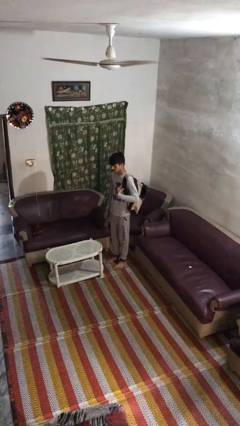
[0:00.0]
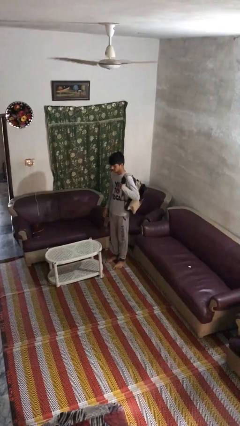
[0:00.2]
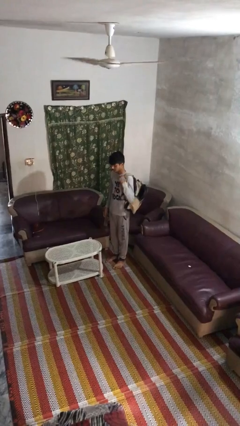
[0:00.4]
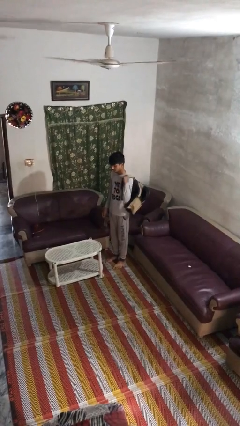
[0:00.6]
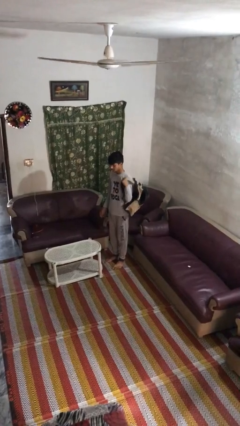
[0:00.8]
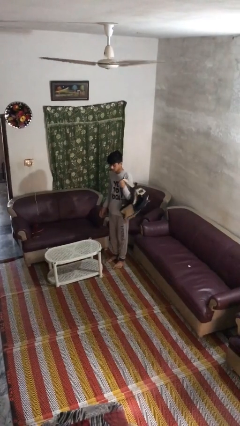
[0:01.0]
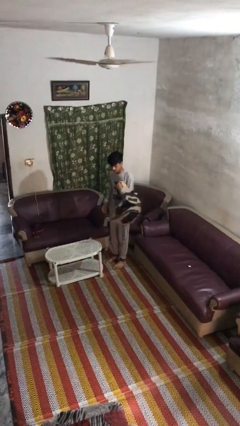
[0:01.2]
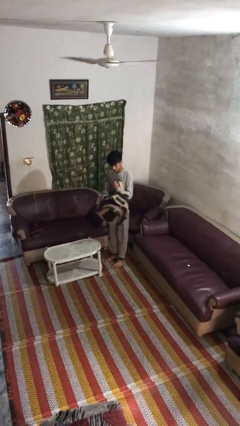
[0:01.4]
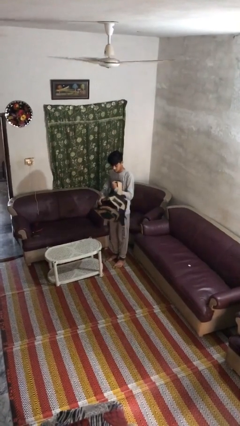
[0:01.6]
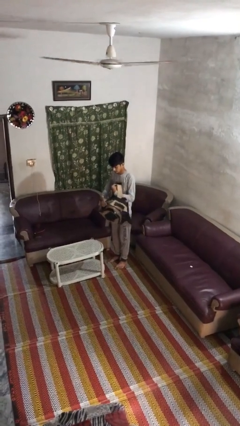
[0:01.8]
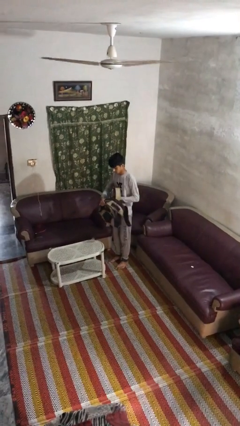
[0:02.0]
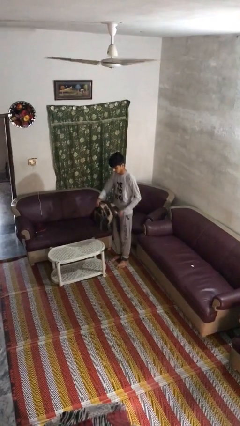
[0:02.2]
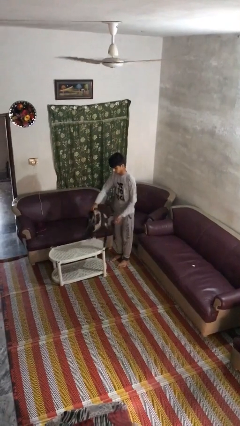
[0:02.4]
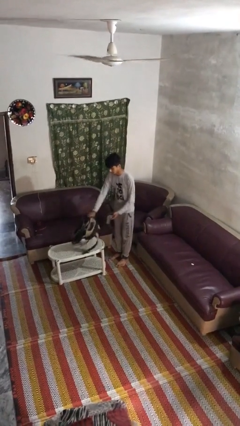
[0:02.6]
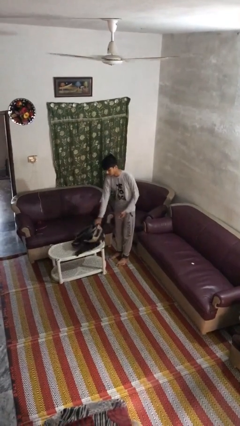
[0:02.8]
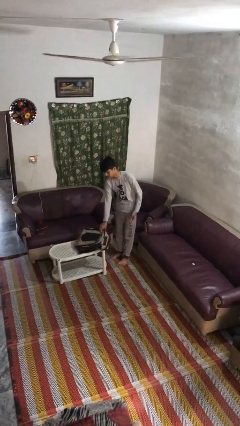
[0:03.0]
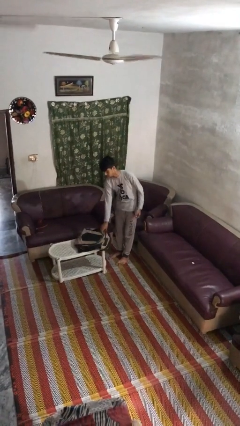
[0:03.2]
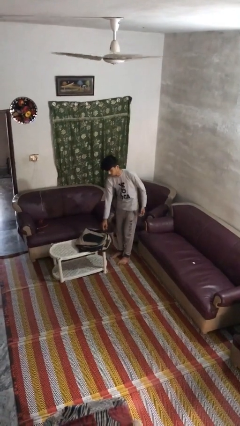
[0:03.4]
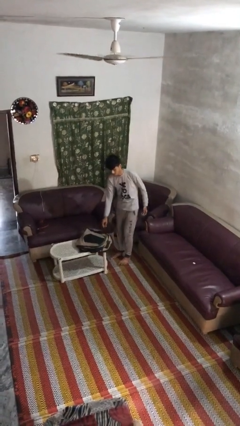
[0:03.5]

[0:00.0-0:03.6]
person puts down object on table

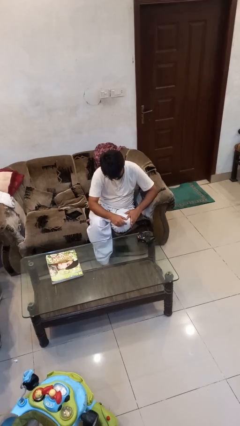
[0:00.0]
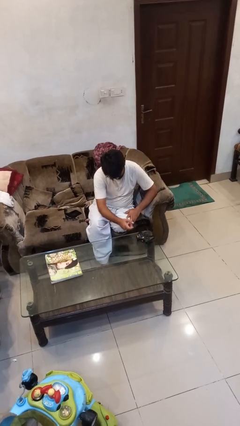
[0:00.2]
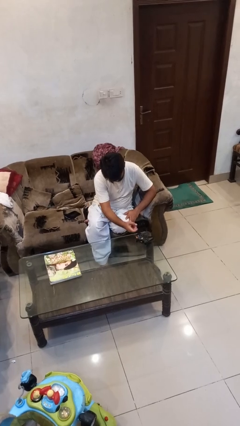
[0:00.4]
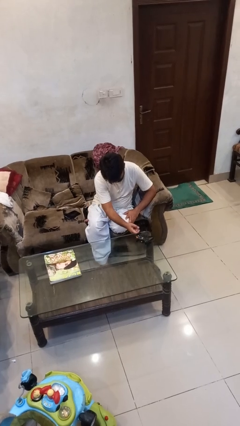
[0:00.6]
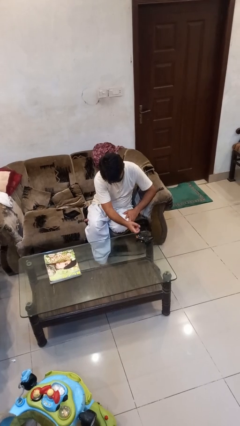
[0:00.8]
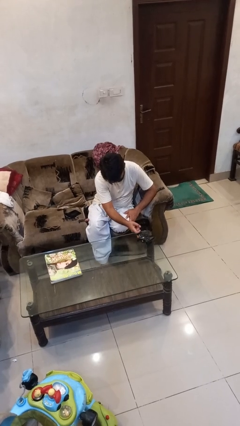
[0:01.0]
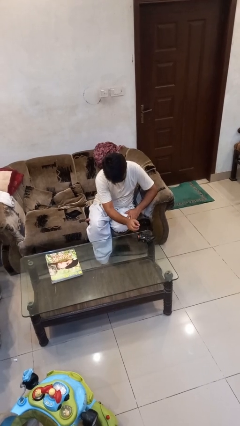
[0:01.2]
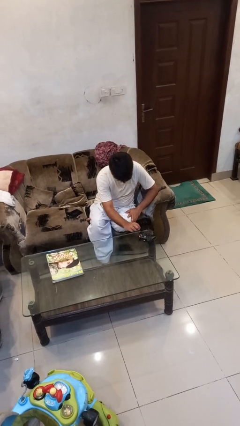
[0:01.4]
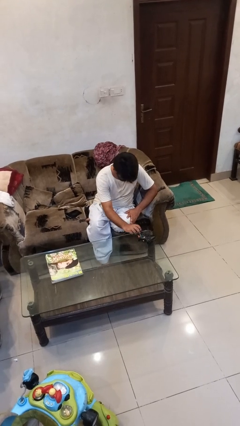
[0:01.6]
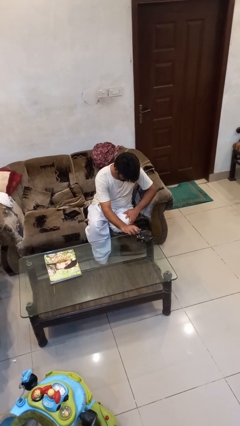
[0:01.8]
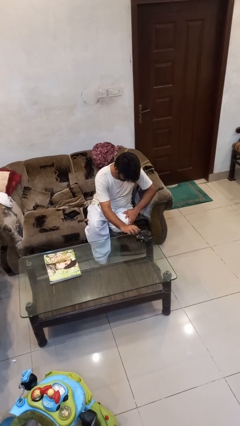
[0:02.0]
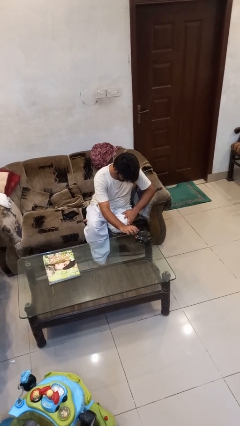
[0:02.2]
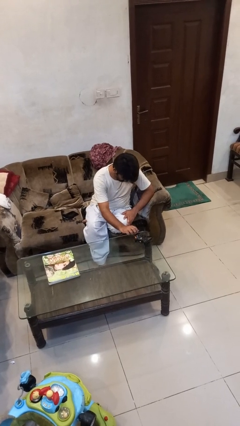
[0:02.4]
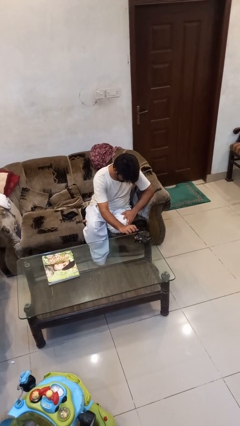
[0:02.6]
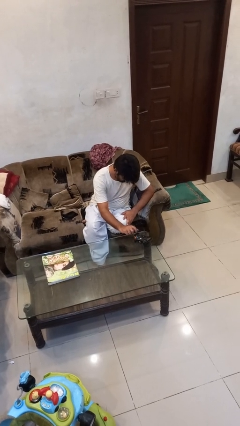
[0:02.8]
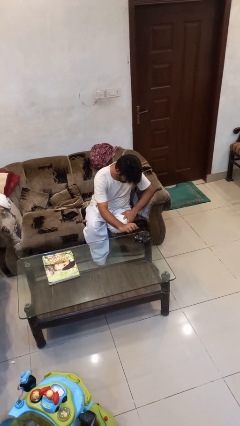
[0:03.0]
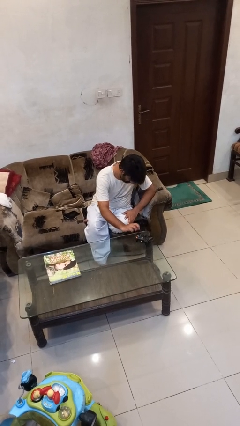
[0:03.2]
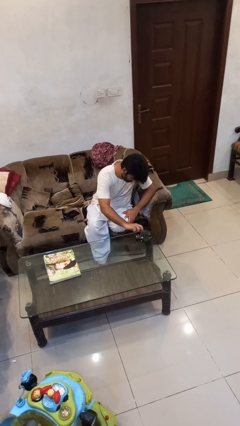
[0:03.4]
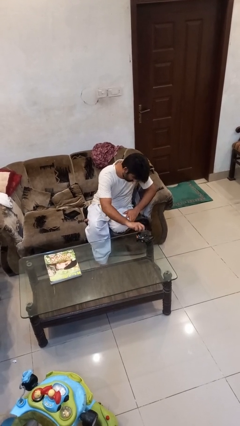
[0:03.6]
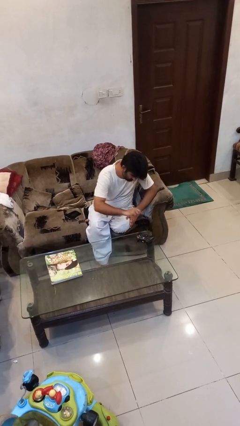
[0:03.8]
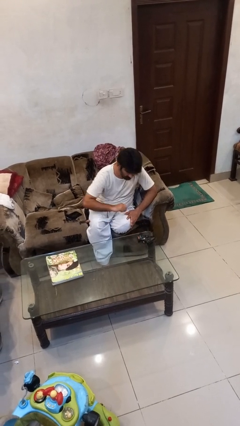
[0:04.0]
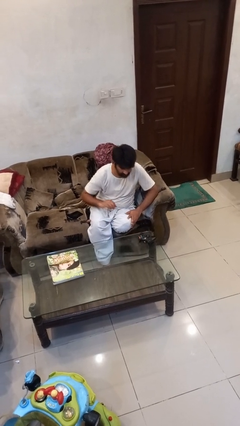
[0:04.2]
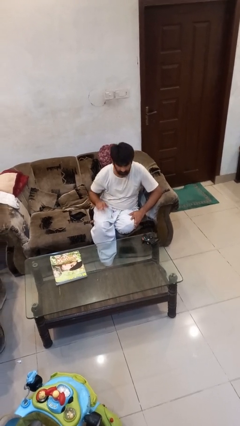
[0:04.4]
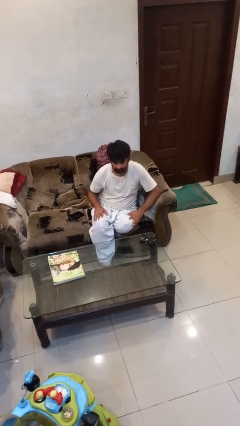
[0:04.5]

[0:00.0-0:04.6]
person taps object with finger

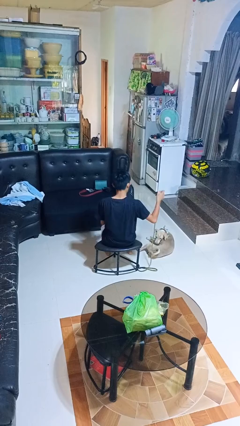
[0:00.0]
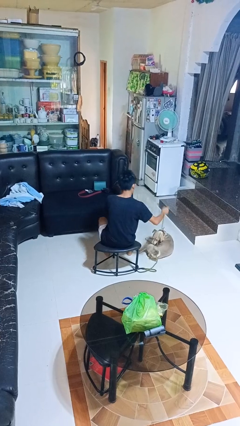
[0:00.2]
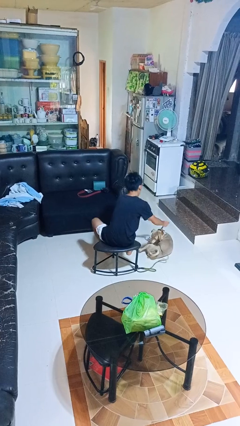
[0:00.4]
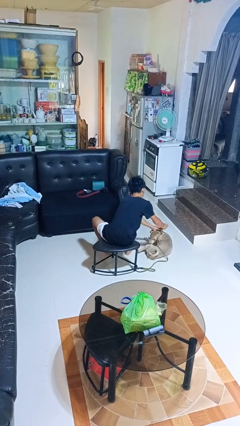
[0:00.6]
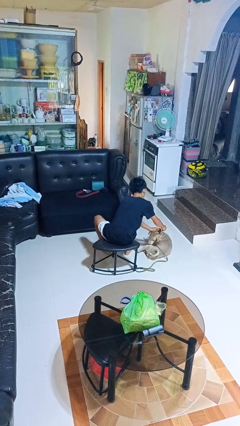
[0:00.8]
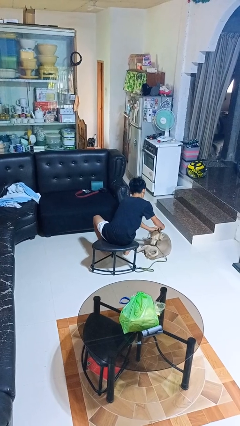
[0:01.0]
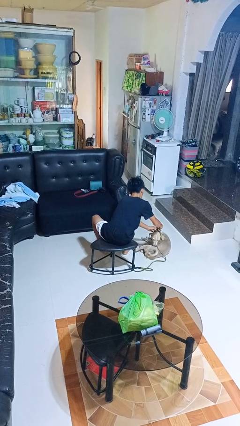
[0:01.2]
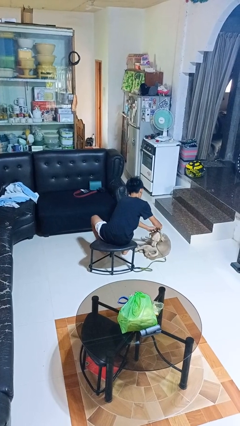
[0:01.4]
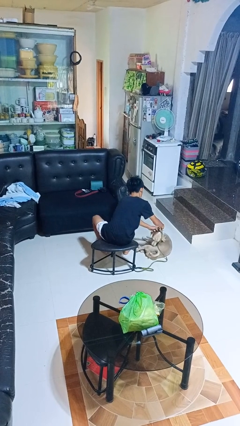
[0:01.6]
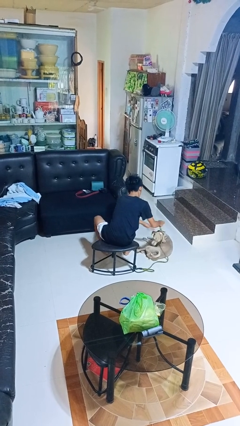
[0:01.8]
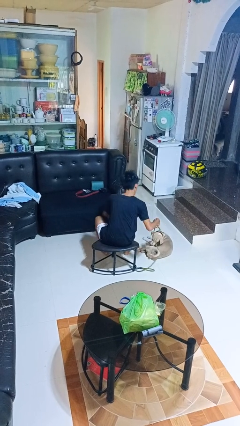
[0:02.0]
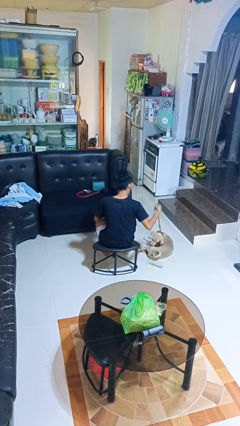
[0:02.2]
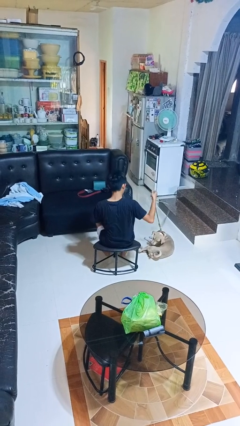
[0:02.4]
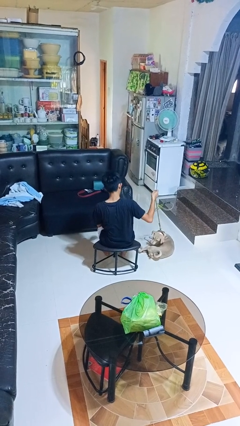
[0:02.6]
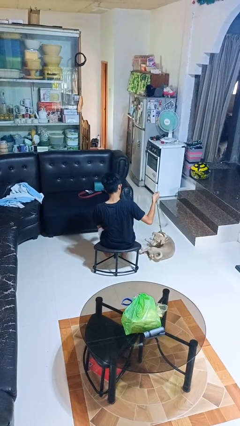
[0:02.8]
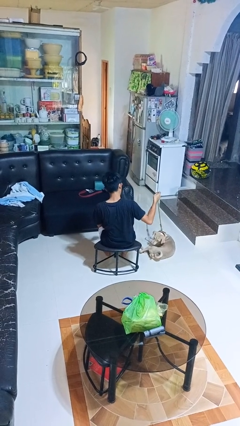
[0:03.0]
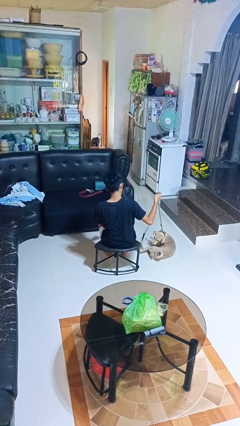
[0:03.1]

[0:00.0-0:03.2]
person attaches leash to dog

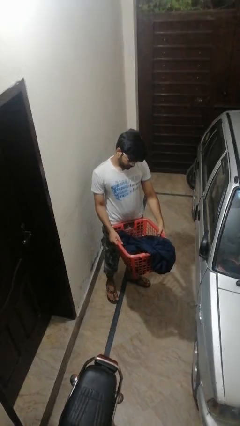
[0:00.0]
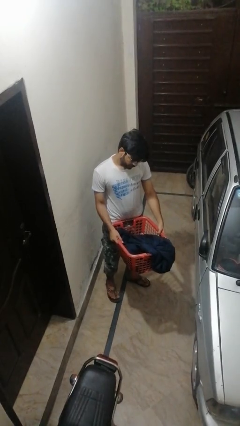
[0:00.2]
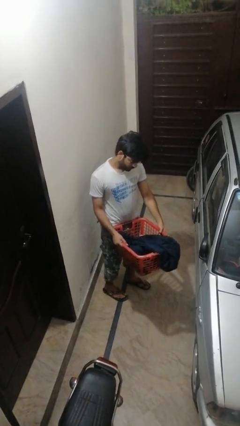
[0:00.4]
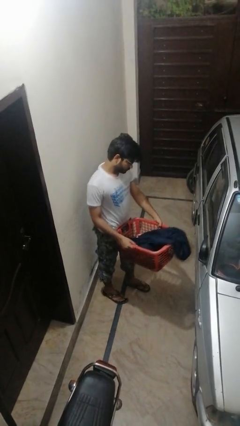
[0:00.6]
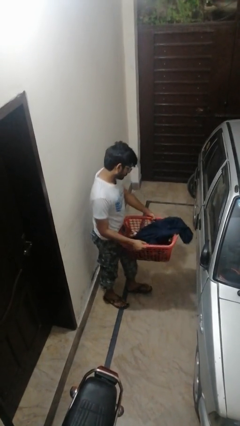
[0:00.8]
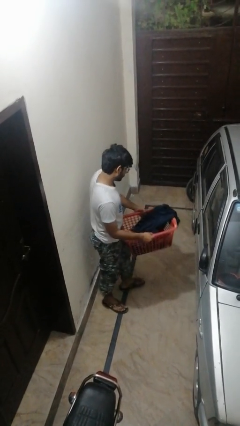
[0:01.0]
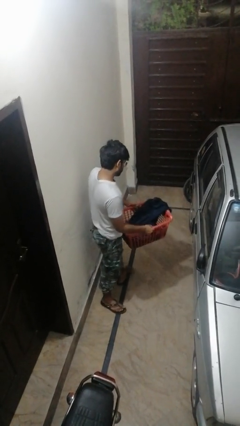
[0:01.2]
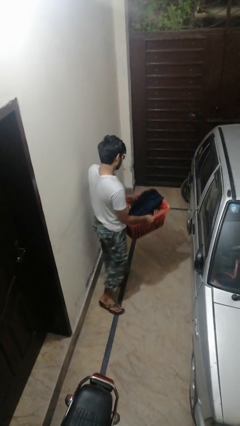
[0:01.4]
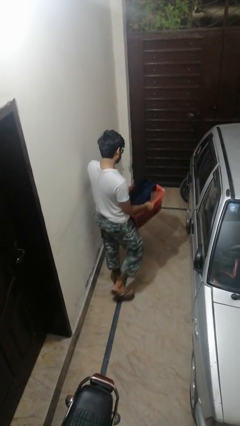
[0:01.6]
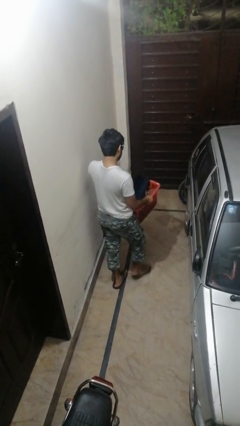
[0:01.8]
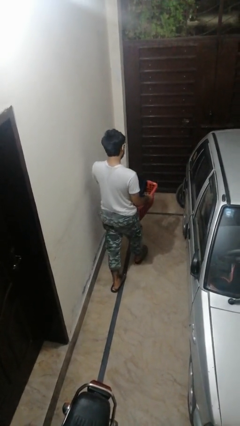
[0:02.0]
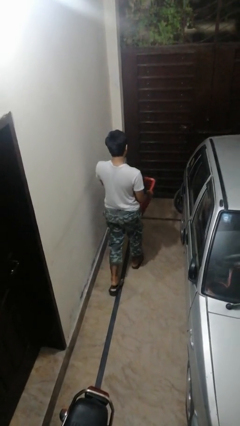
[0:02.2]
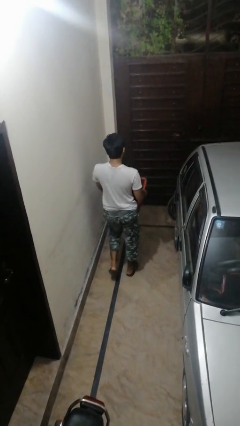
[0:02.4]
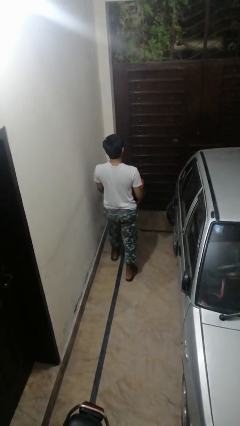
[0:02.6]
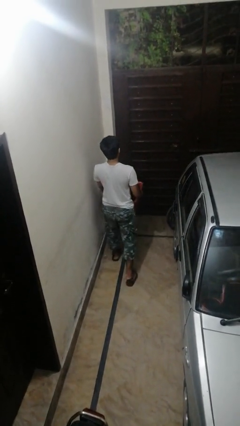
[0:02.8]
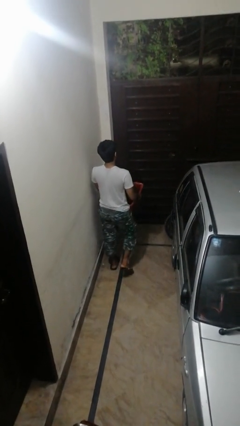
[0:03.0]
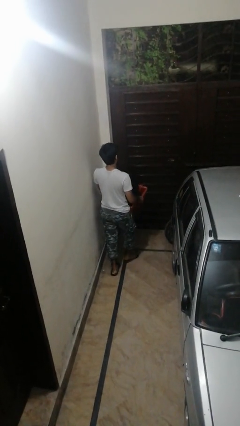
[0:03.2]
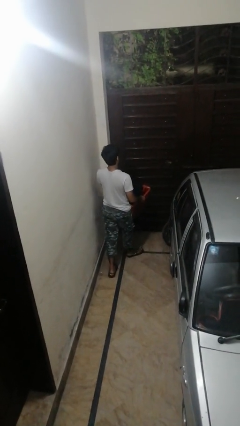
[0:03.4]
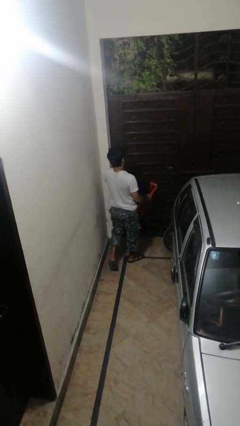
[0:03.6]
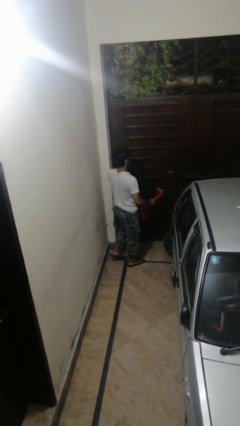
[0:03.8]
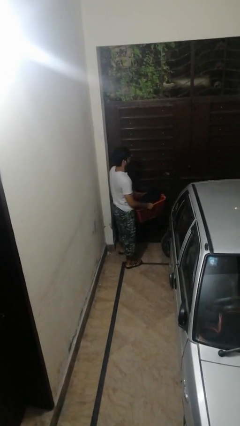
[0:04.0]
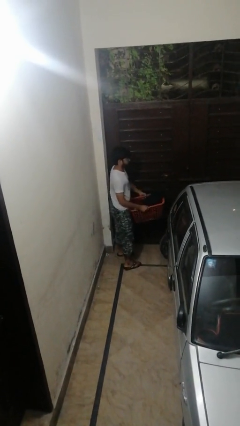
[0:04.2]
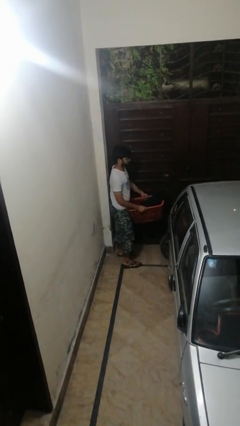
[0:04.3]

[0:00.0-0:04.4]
person carries laundry basket

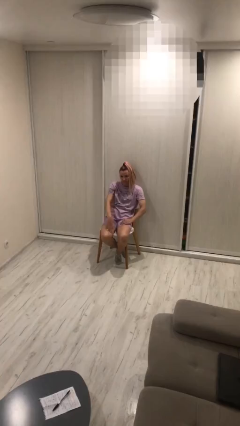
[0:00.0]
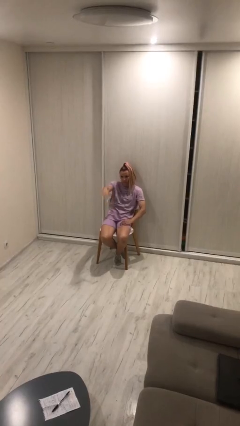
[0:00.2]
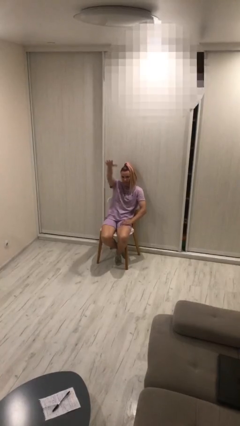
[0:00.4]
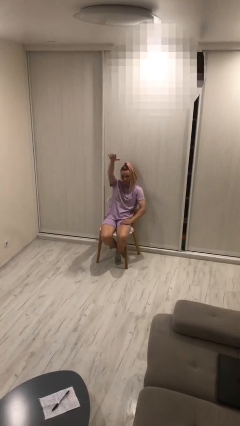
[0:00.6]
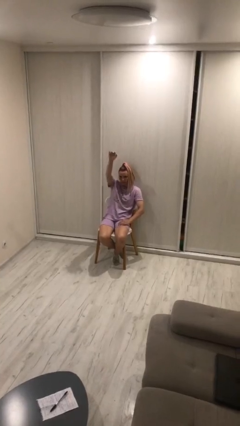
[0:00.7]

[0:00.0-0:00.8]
person gestures swipe up

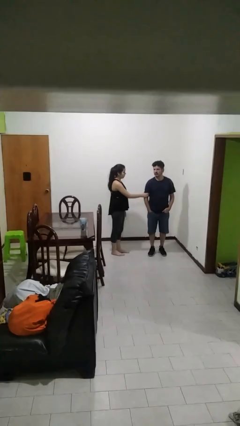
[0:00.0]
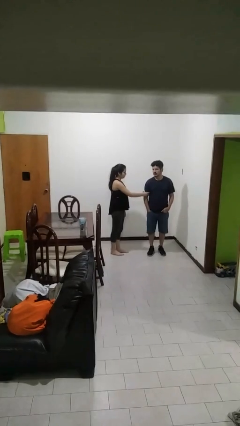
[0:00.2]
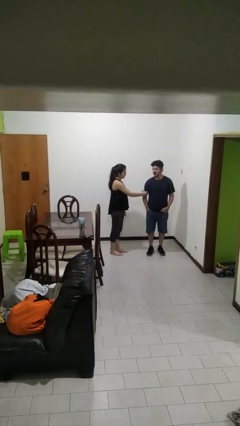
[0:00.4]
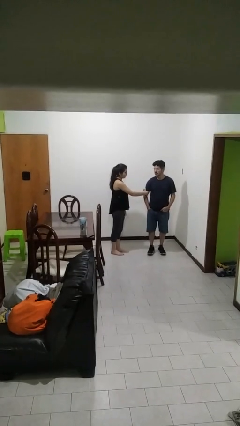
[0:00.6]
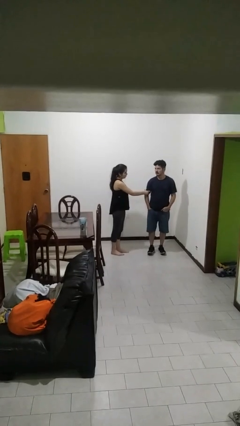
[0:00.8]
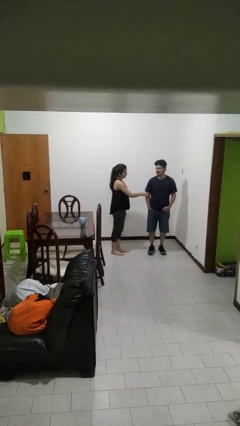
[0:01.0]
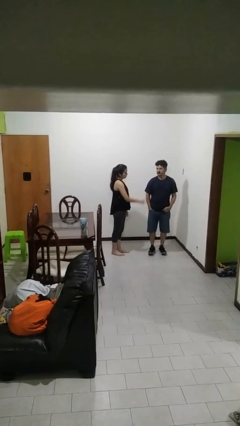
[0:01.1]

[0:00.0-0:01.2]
person grabs person by bicep
